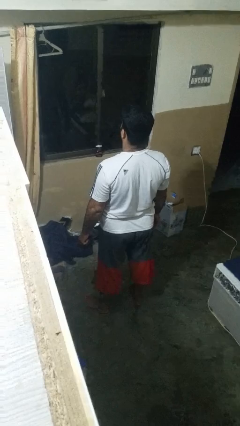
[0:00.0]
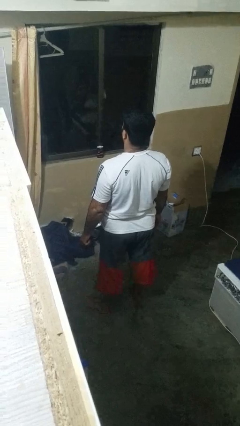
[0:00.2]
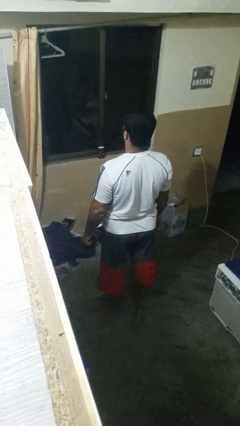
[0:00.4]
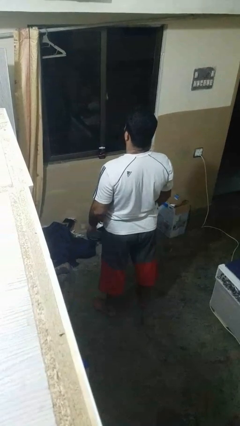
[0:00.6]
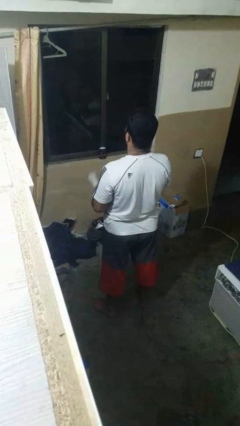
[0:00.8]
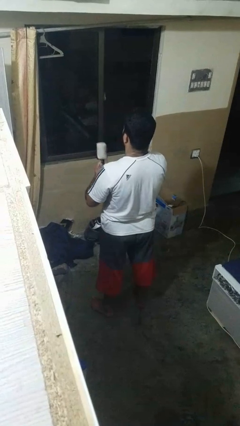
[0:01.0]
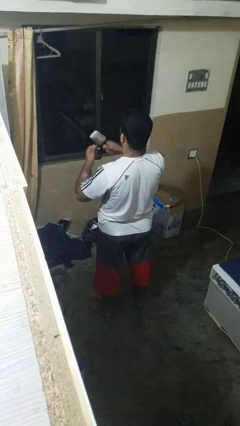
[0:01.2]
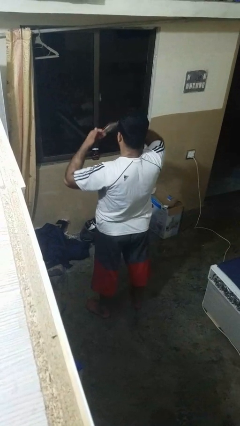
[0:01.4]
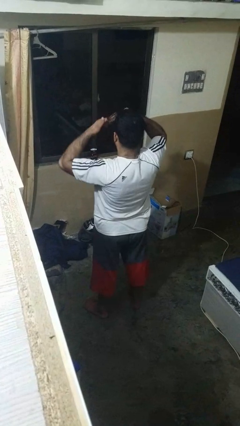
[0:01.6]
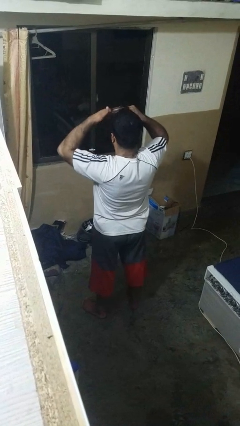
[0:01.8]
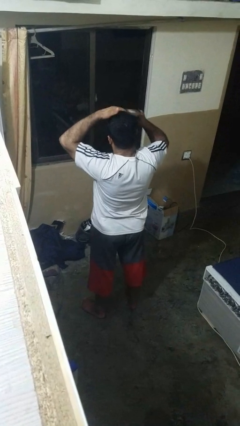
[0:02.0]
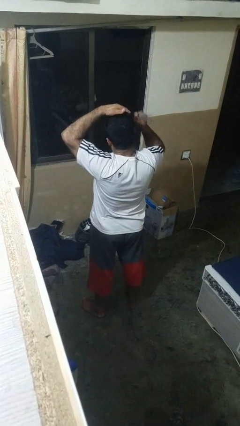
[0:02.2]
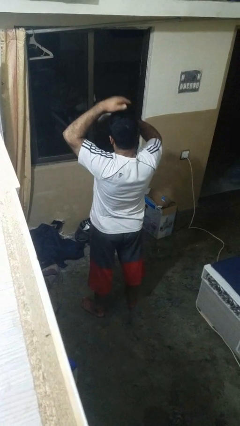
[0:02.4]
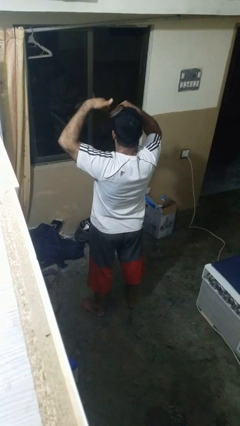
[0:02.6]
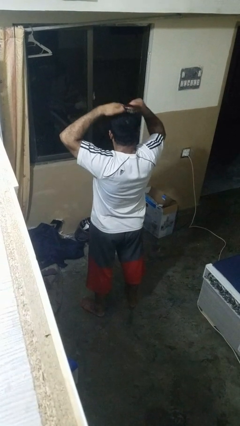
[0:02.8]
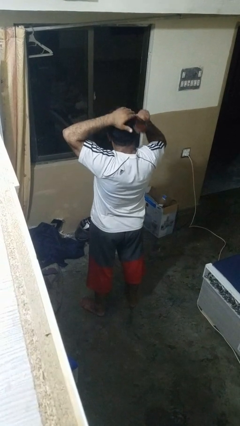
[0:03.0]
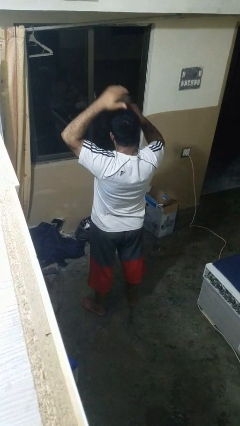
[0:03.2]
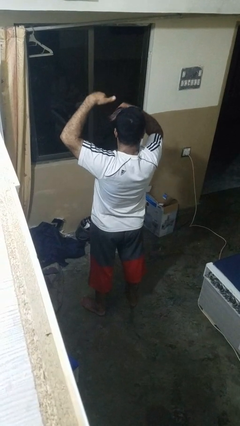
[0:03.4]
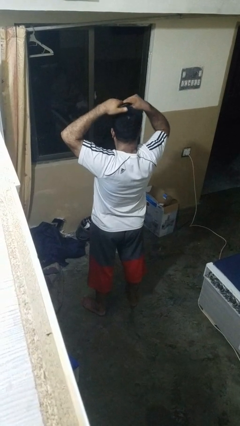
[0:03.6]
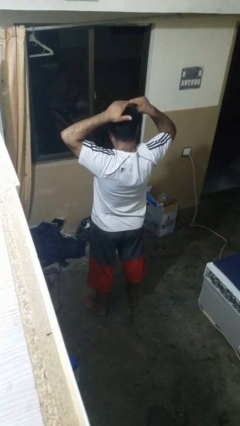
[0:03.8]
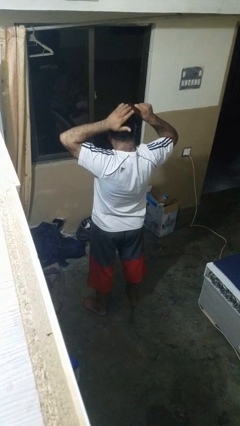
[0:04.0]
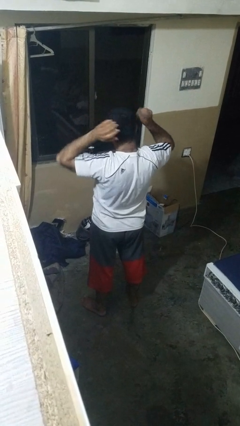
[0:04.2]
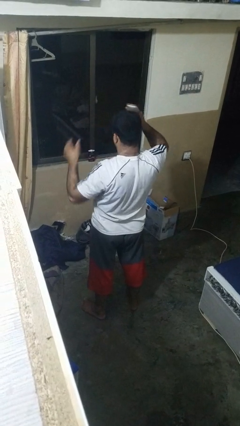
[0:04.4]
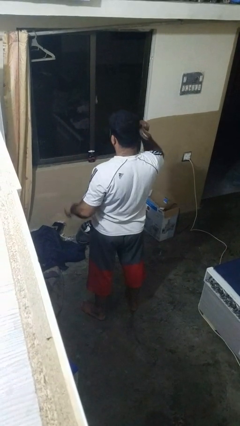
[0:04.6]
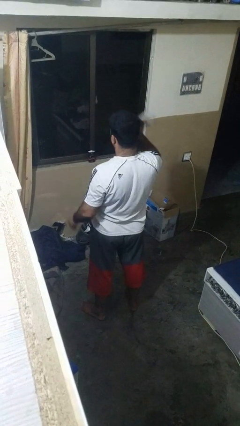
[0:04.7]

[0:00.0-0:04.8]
person brushes hair

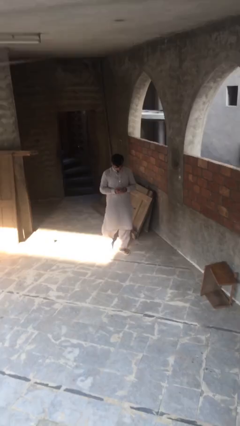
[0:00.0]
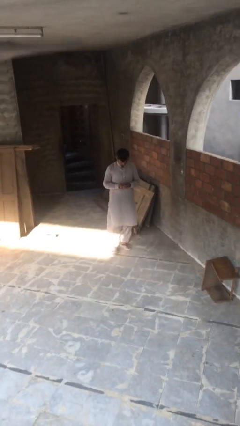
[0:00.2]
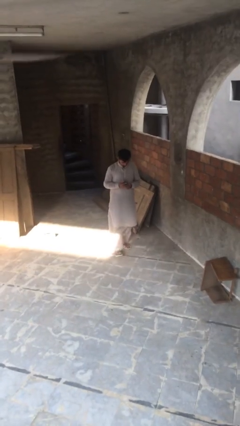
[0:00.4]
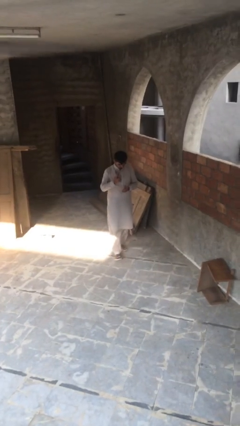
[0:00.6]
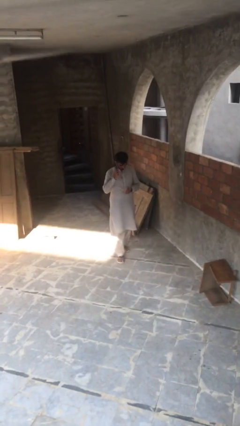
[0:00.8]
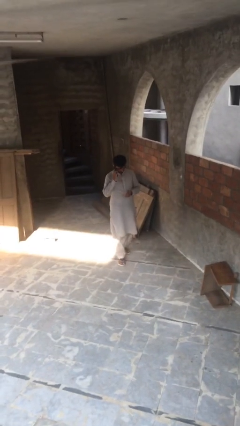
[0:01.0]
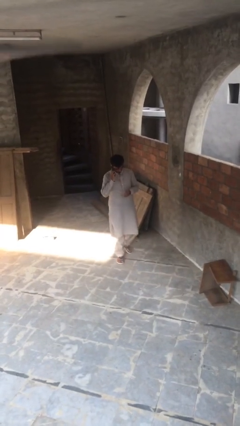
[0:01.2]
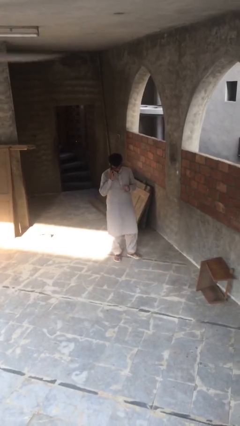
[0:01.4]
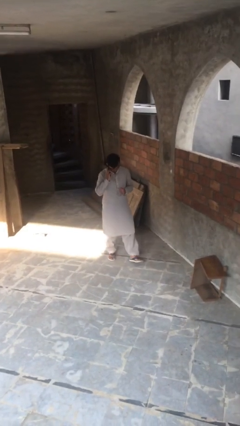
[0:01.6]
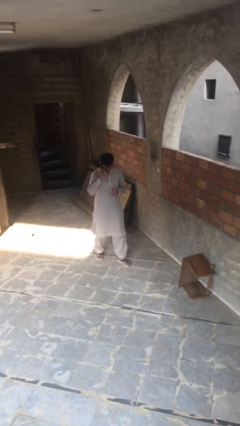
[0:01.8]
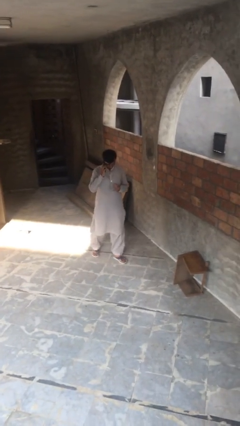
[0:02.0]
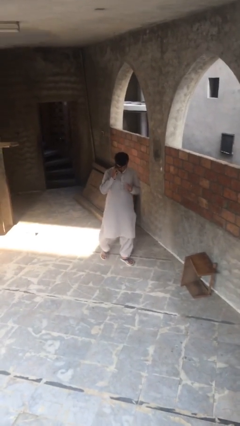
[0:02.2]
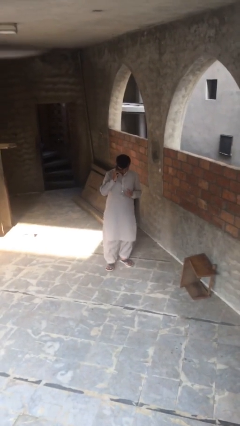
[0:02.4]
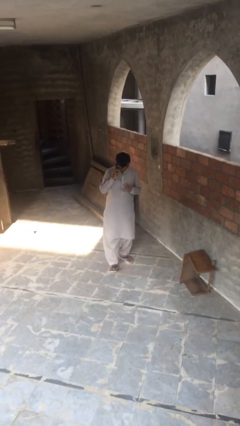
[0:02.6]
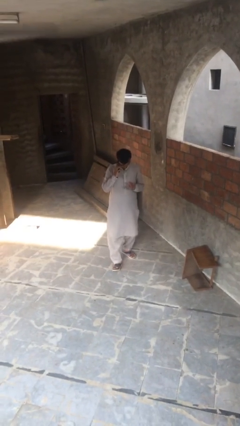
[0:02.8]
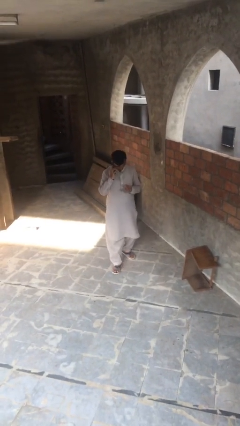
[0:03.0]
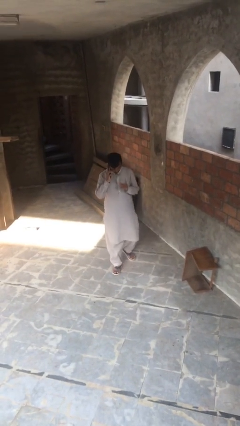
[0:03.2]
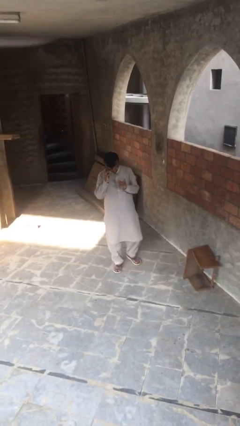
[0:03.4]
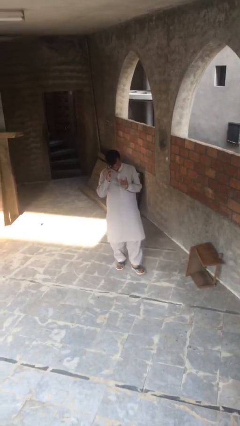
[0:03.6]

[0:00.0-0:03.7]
person talks on phone

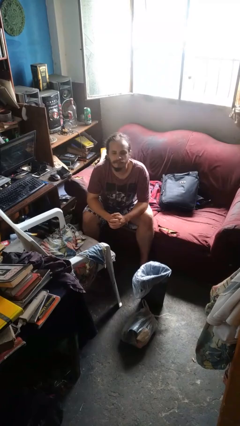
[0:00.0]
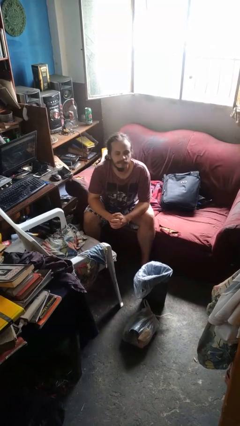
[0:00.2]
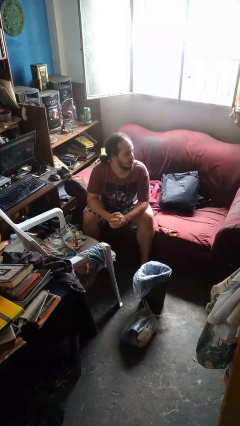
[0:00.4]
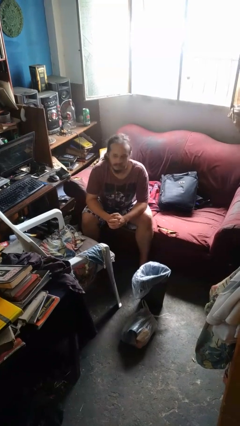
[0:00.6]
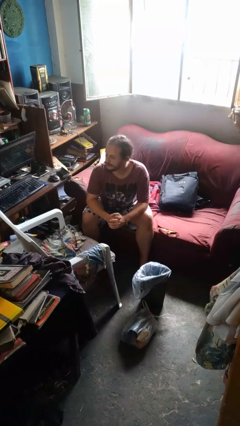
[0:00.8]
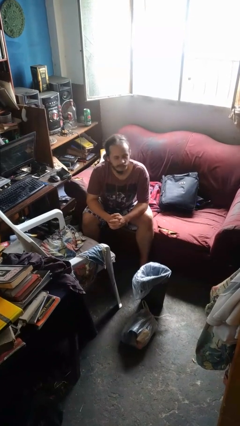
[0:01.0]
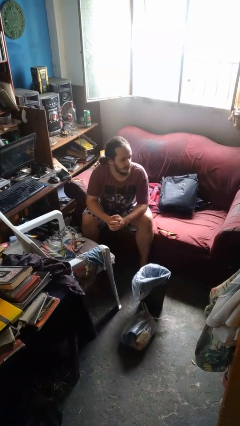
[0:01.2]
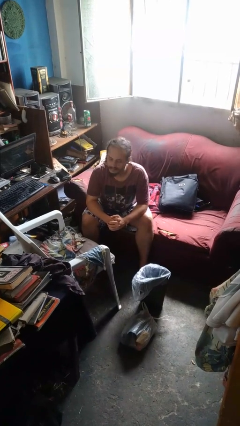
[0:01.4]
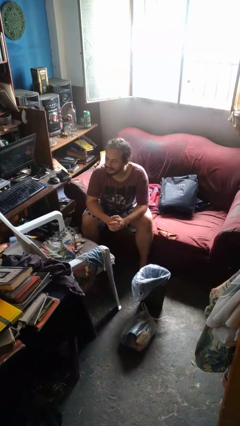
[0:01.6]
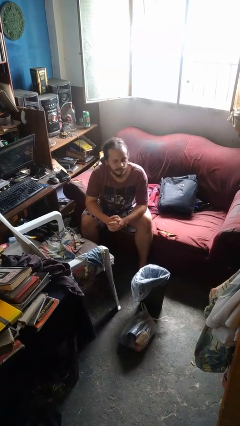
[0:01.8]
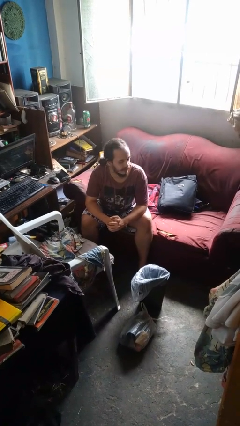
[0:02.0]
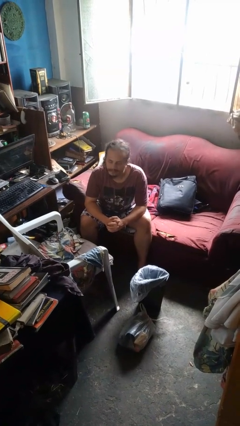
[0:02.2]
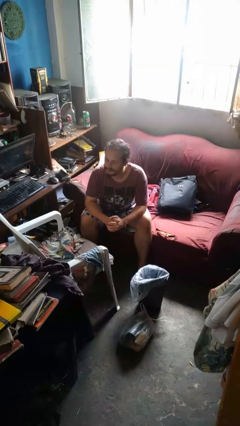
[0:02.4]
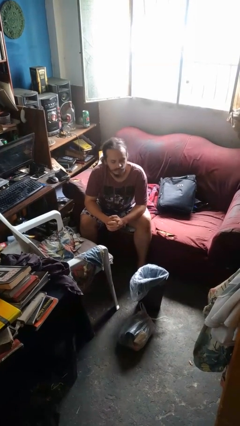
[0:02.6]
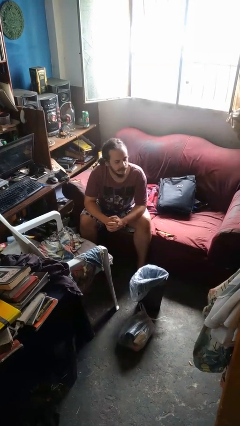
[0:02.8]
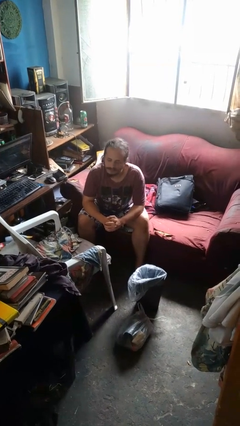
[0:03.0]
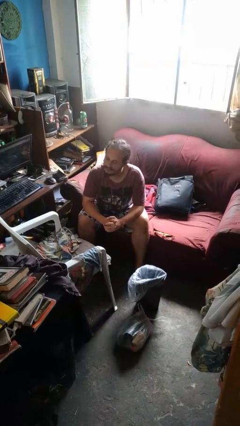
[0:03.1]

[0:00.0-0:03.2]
person shakes head

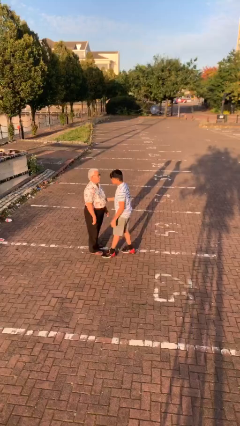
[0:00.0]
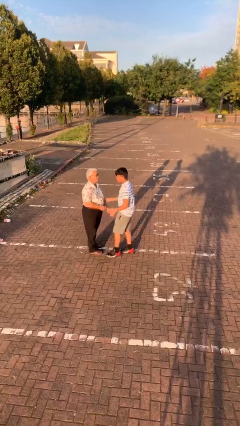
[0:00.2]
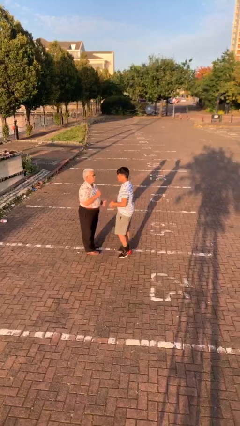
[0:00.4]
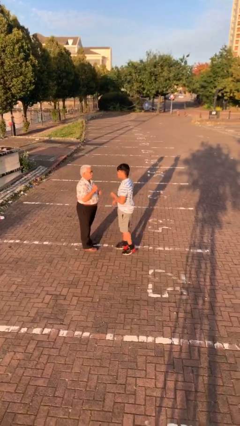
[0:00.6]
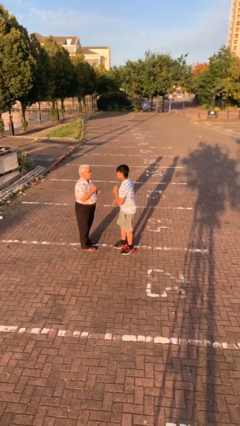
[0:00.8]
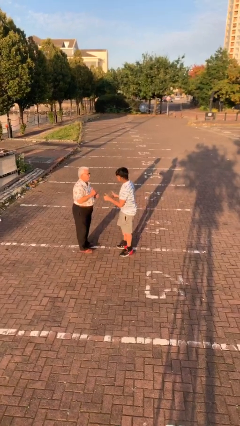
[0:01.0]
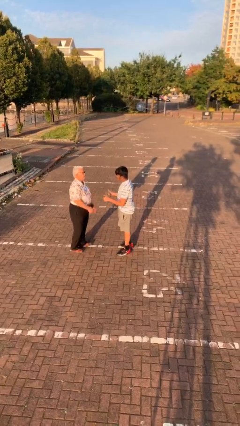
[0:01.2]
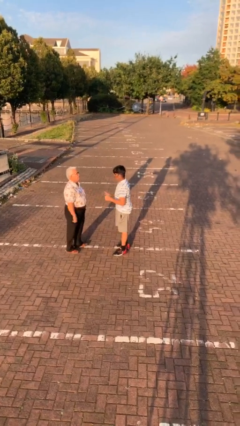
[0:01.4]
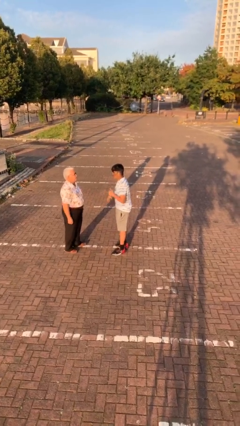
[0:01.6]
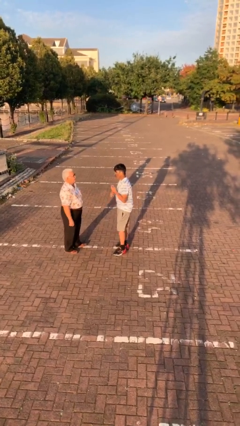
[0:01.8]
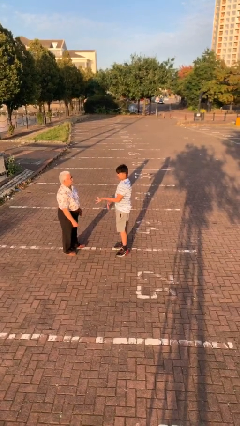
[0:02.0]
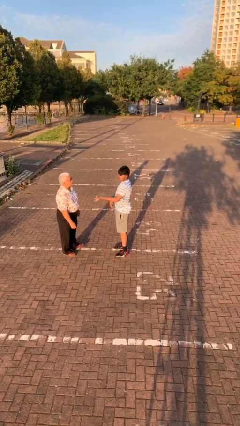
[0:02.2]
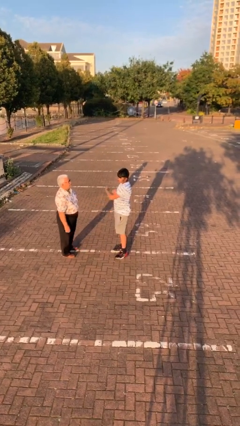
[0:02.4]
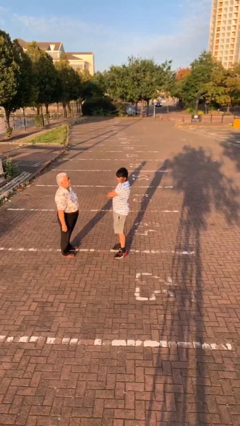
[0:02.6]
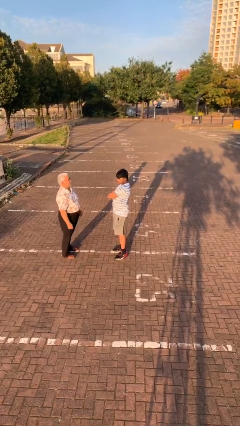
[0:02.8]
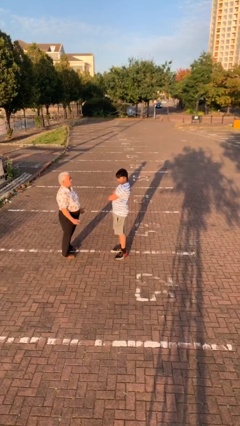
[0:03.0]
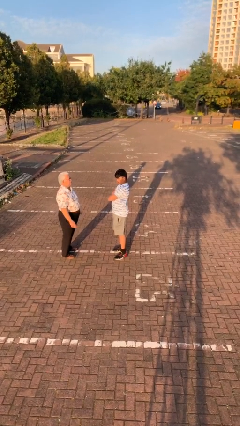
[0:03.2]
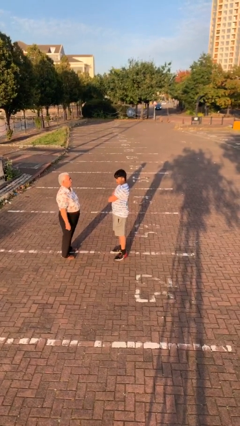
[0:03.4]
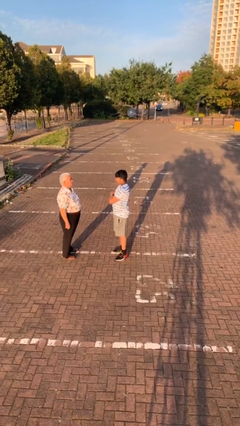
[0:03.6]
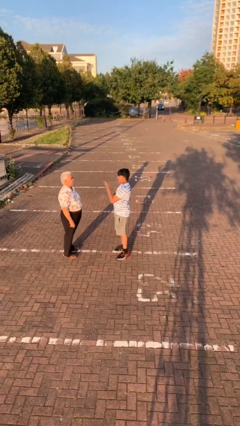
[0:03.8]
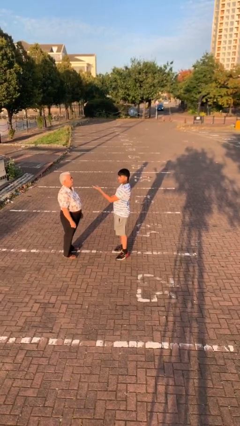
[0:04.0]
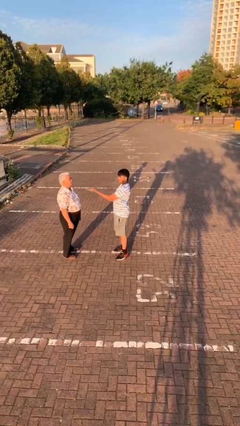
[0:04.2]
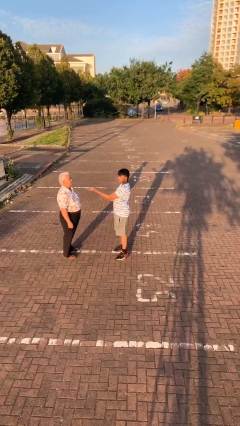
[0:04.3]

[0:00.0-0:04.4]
person talks to person

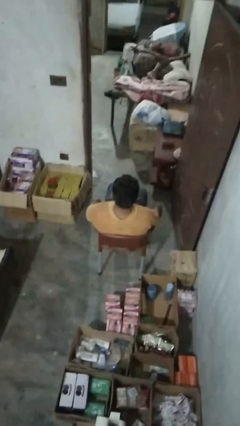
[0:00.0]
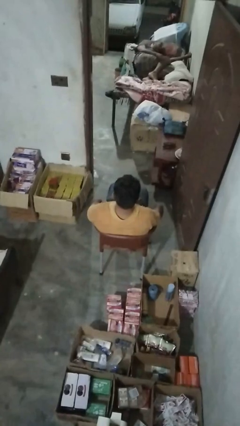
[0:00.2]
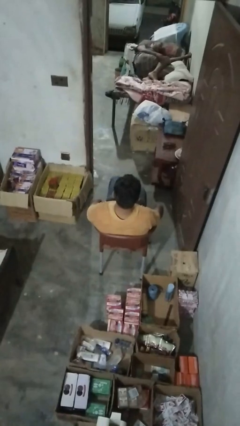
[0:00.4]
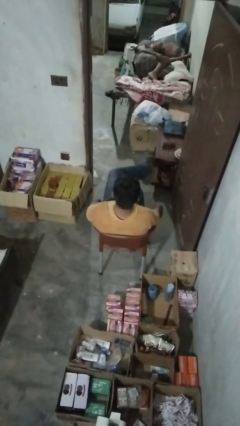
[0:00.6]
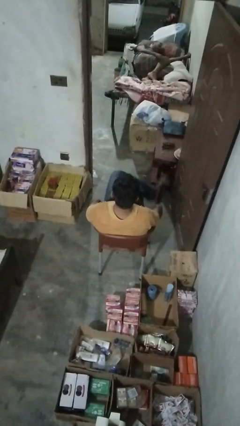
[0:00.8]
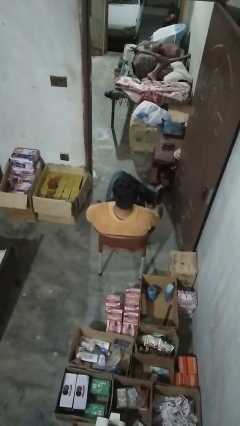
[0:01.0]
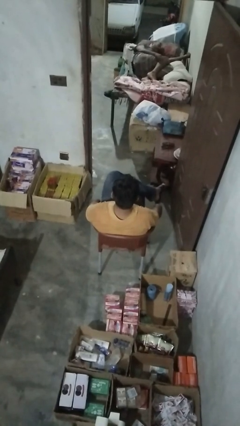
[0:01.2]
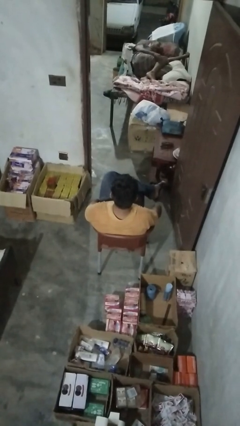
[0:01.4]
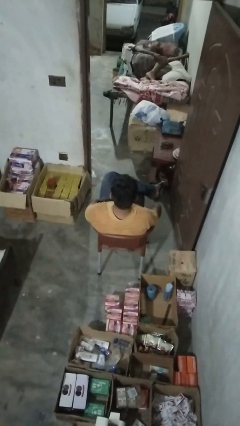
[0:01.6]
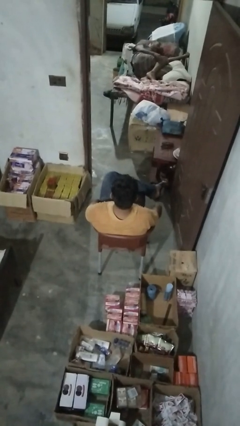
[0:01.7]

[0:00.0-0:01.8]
person crosses legs

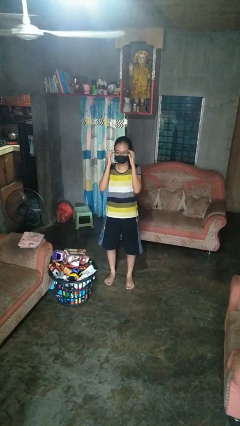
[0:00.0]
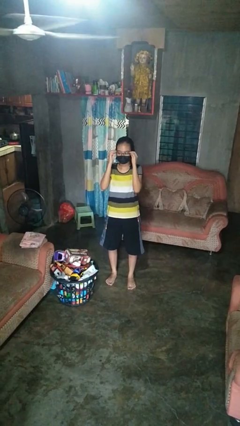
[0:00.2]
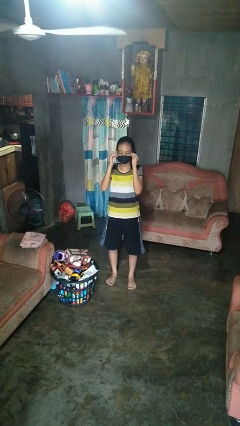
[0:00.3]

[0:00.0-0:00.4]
person takes off glasses
